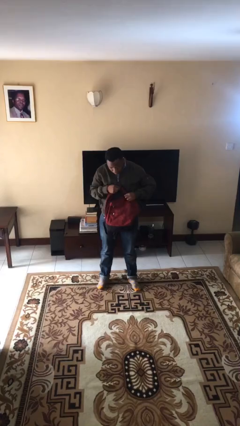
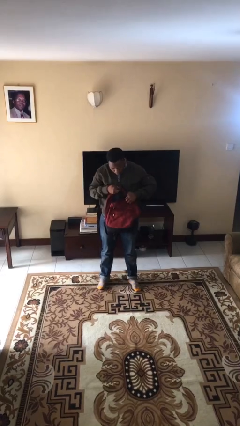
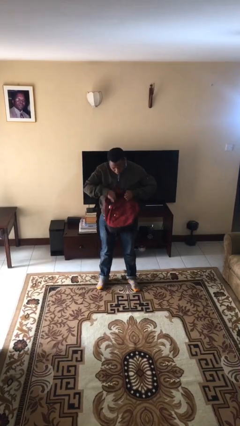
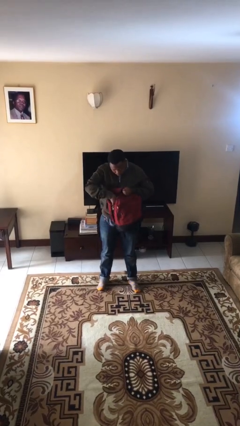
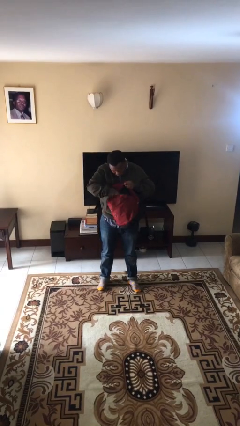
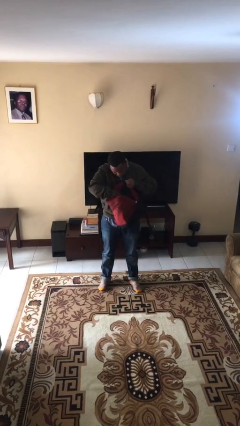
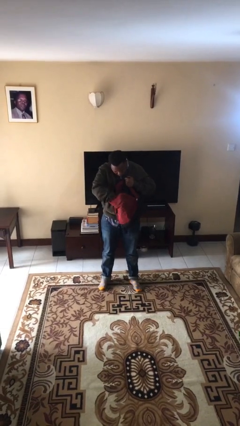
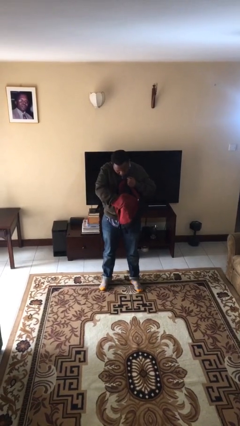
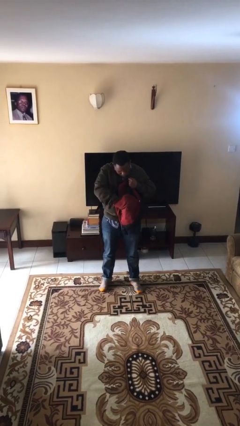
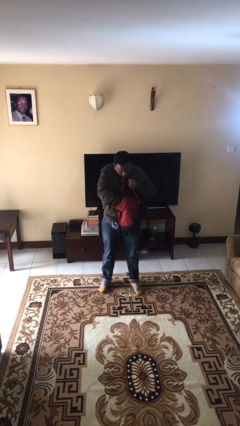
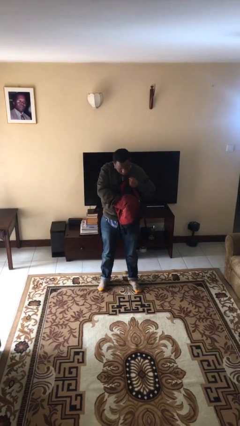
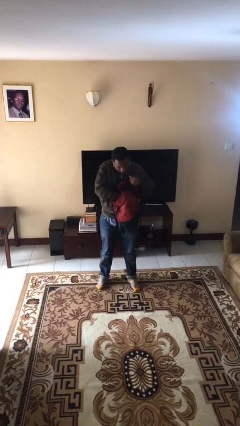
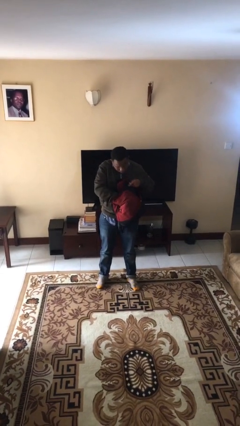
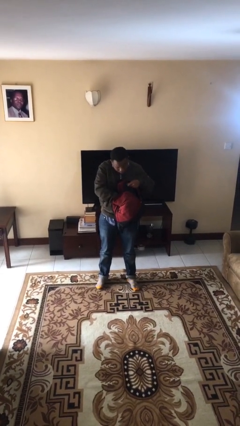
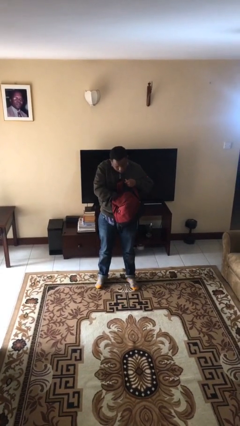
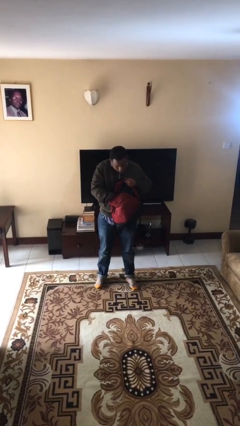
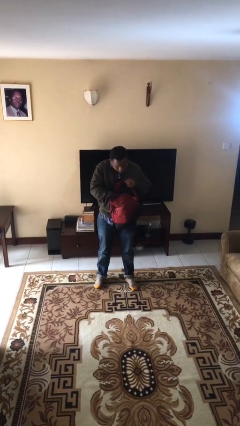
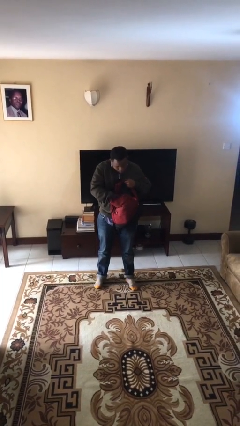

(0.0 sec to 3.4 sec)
person searches in backpack

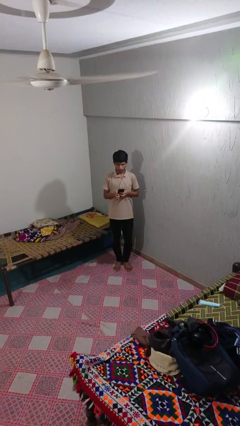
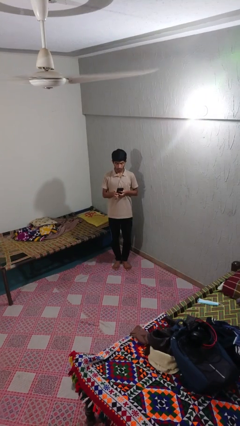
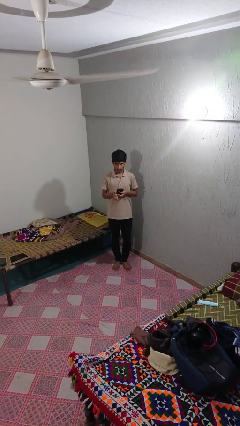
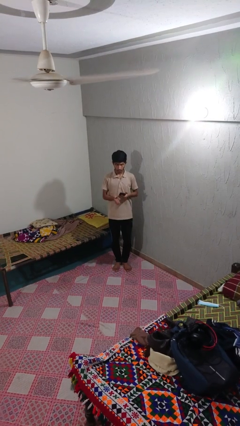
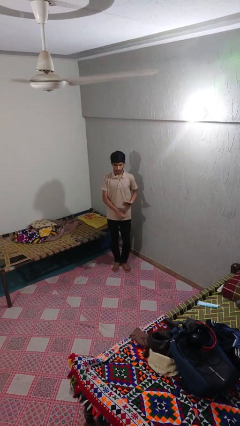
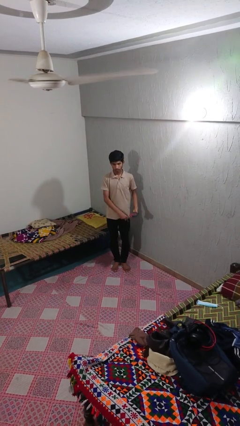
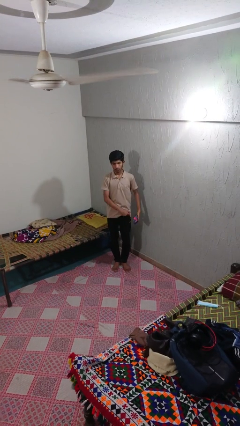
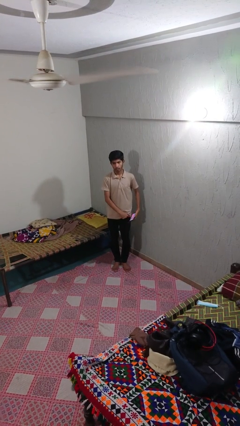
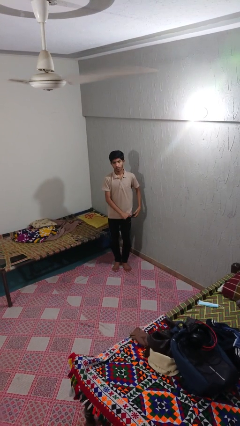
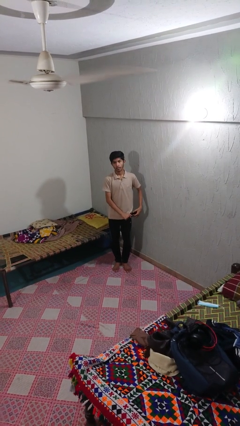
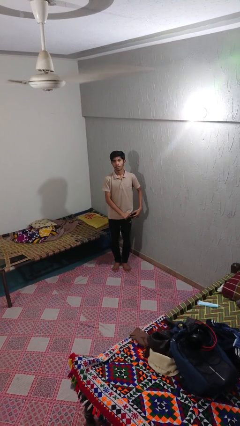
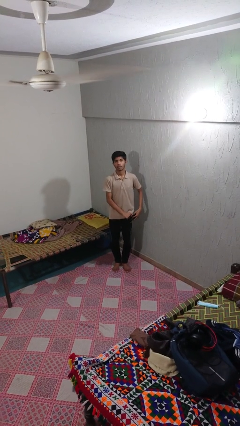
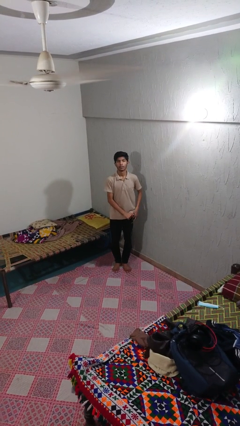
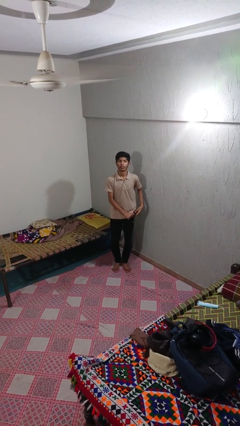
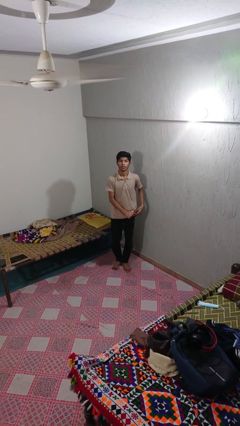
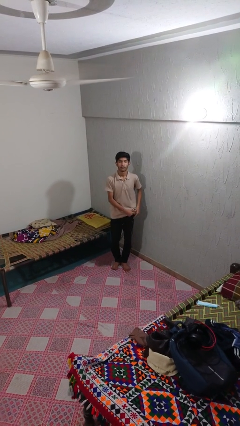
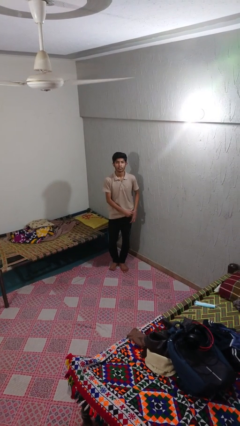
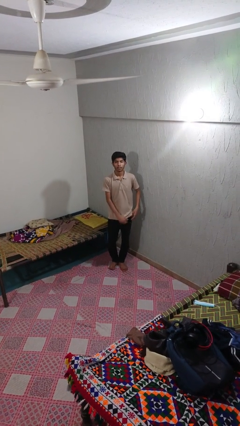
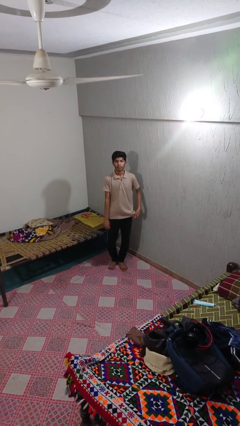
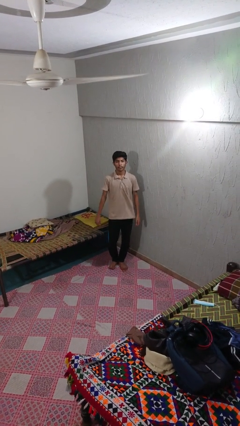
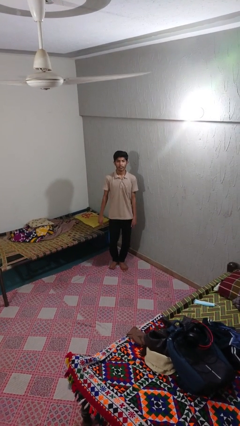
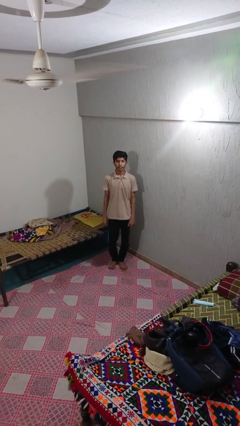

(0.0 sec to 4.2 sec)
person puts phone into pocket

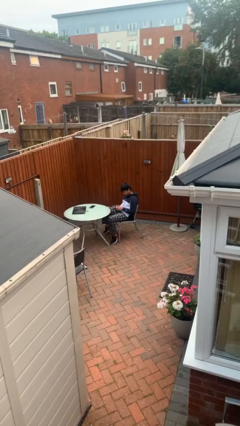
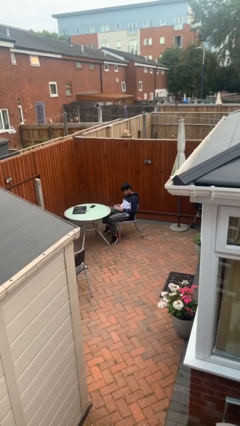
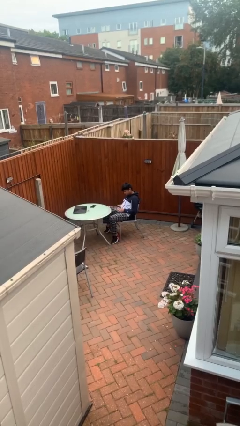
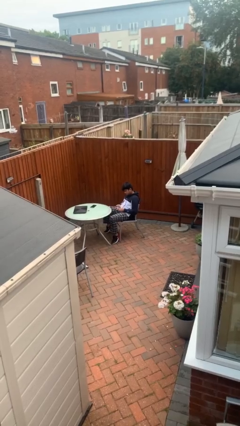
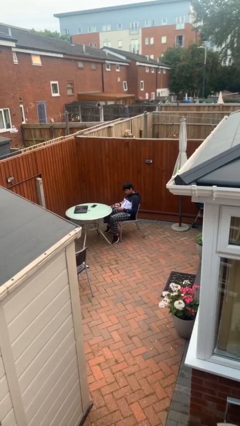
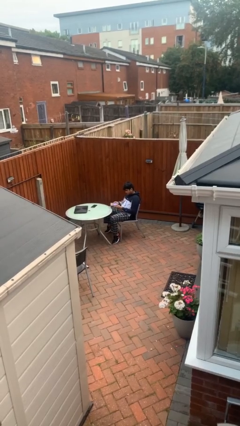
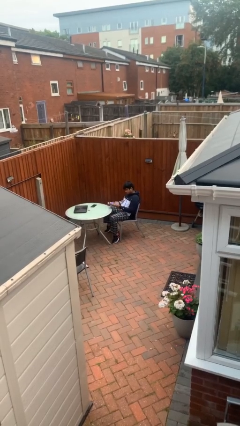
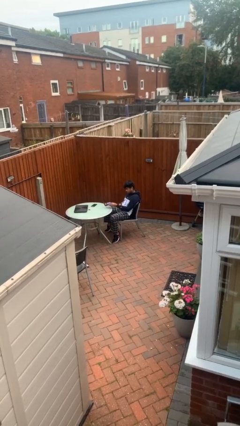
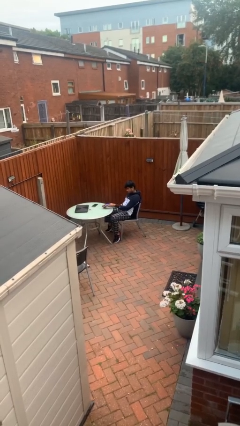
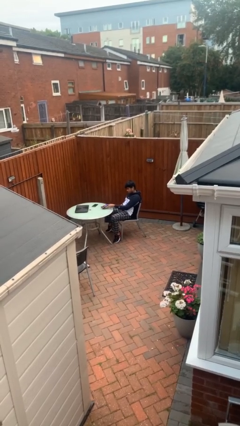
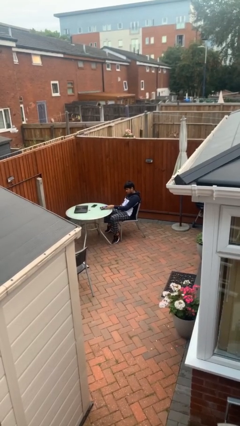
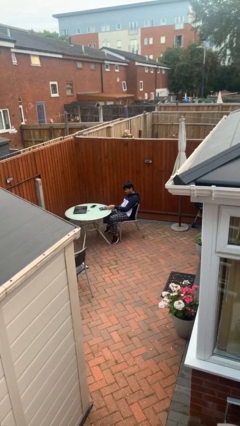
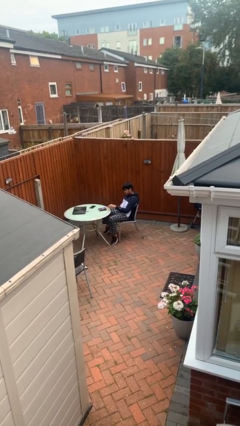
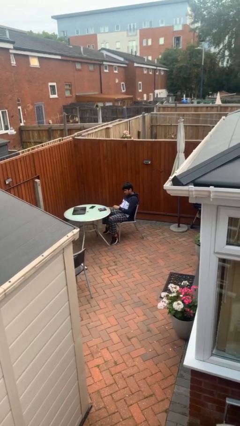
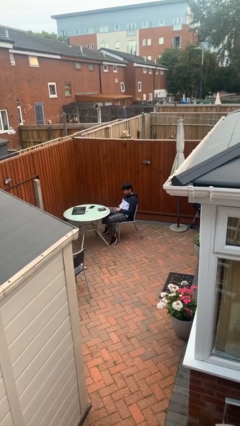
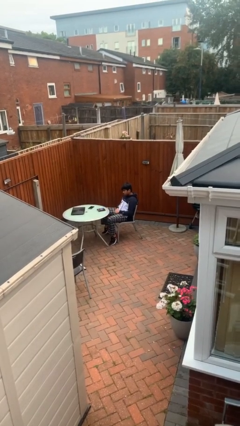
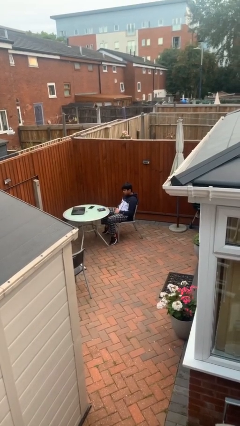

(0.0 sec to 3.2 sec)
person puts down object on table

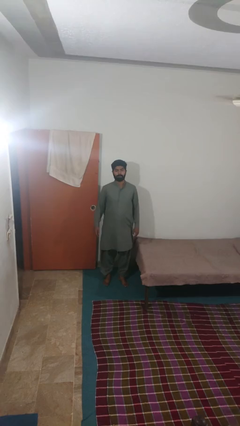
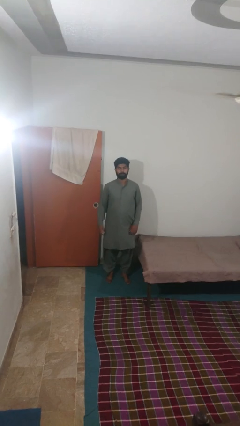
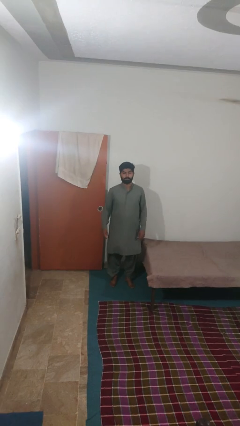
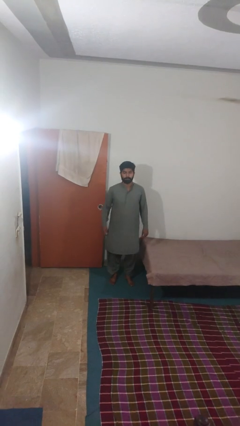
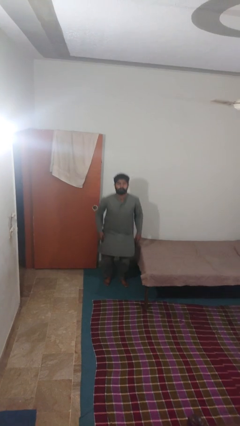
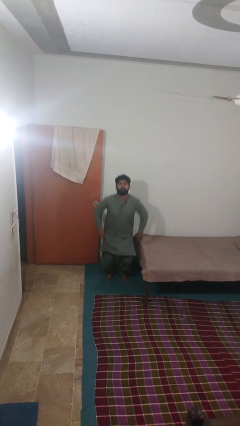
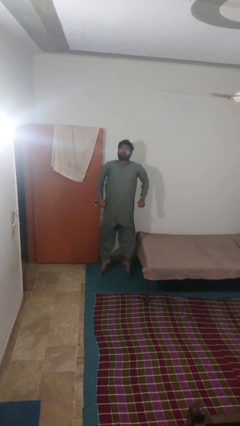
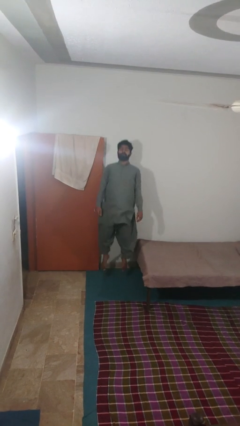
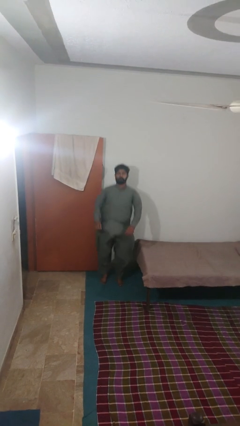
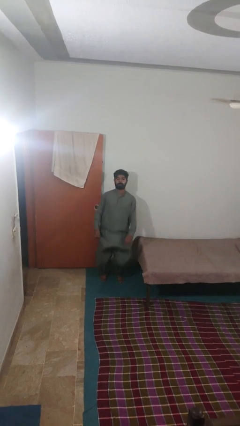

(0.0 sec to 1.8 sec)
person jumps

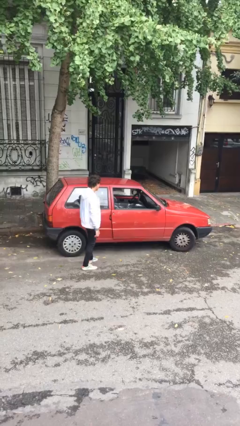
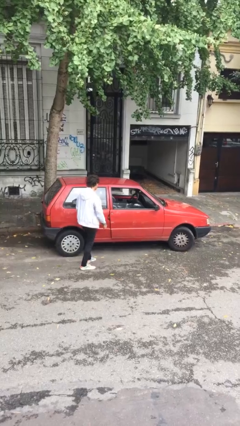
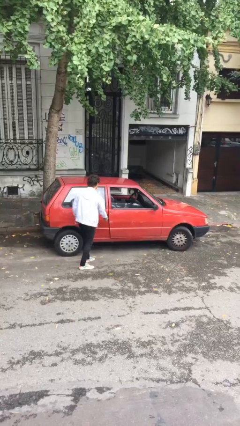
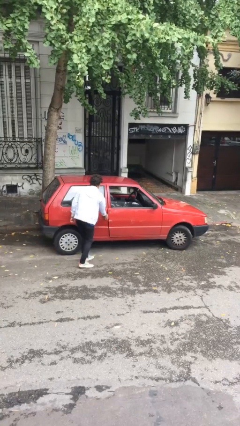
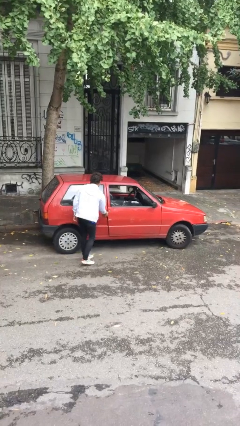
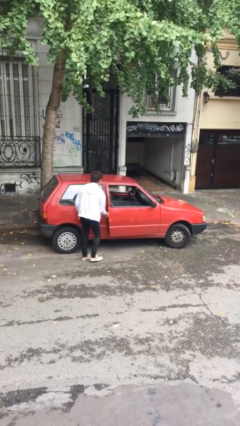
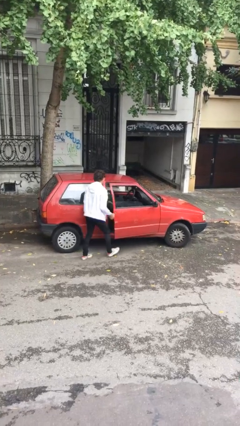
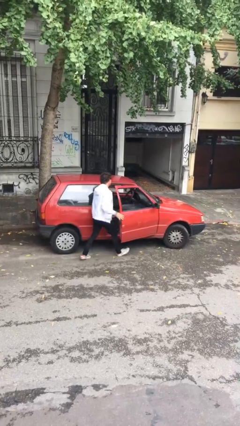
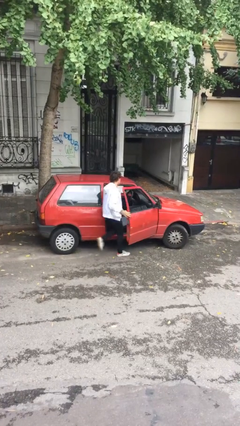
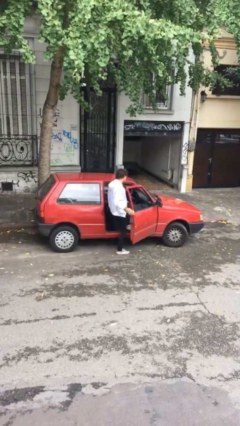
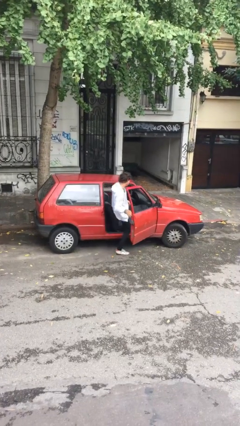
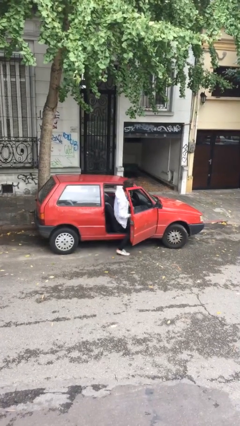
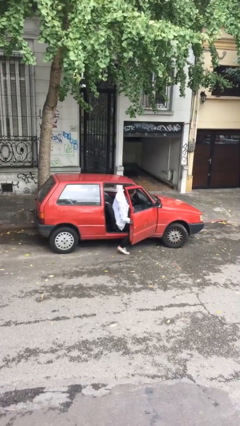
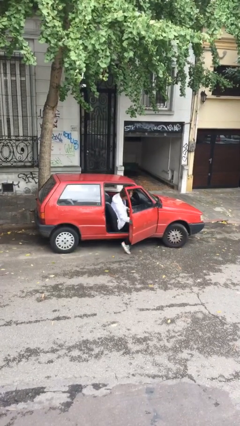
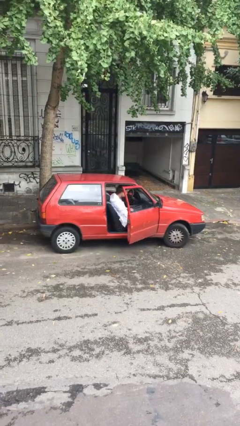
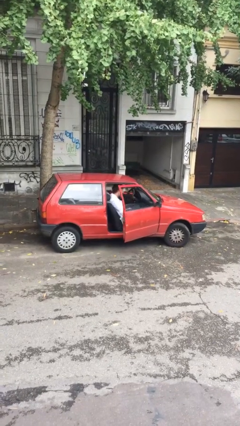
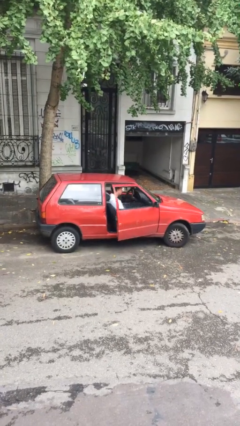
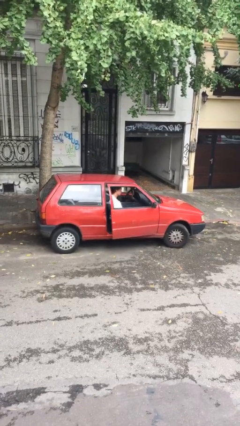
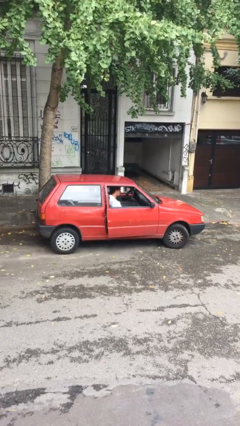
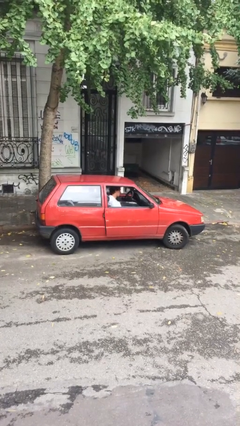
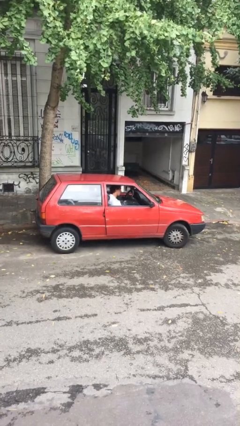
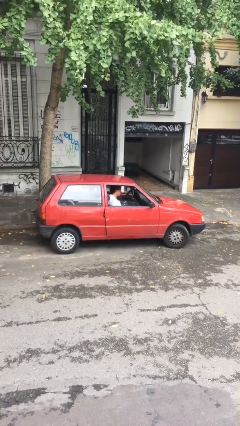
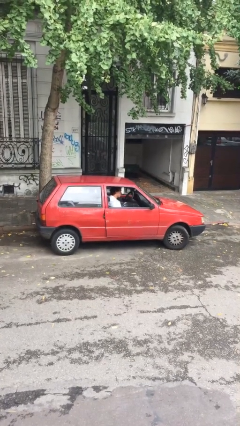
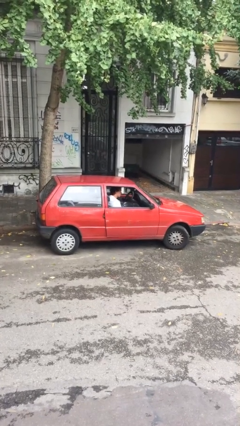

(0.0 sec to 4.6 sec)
car picks up person
